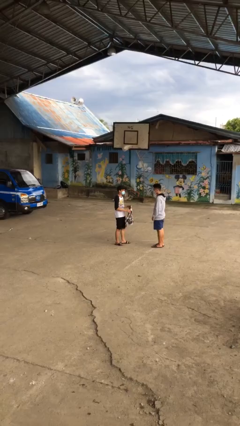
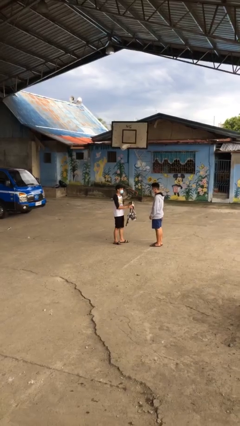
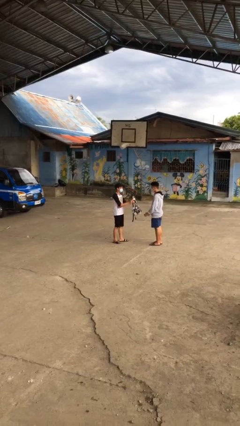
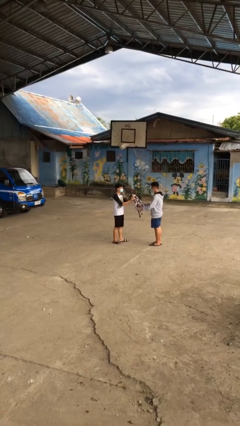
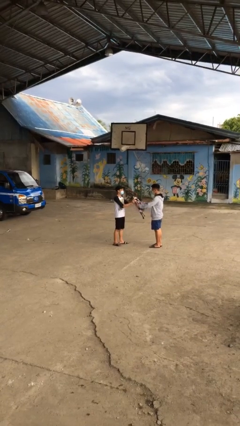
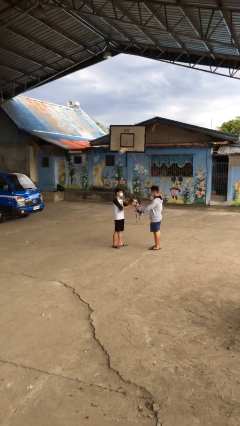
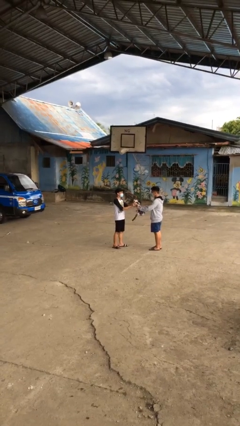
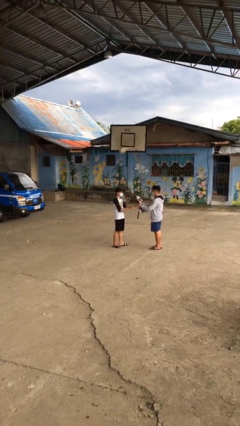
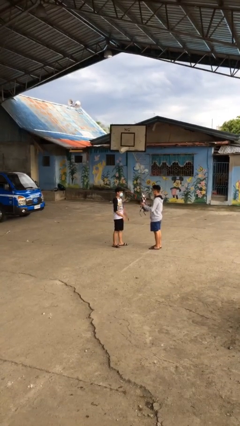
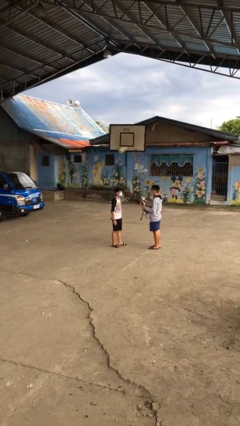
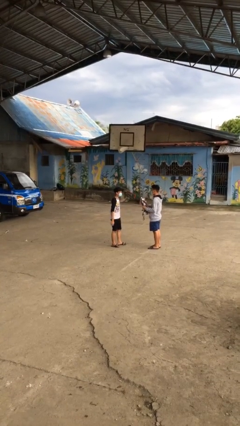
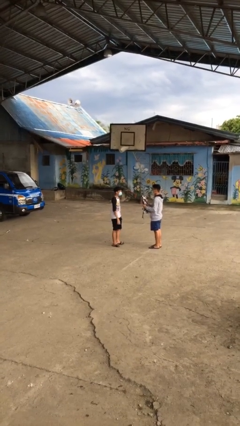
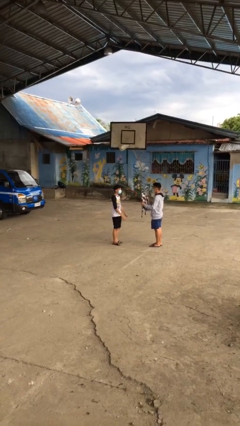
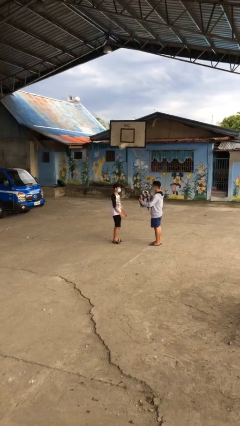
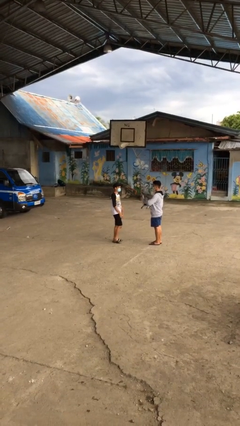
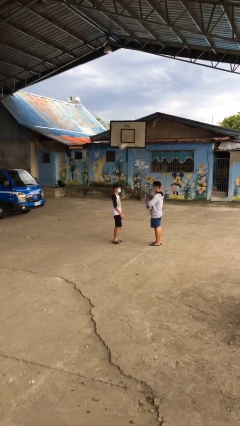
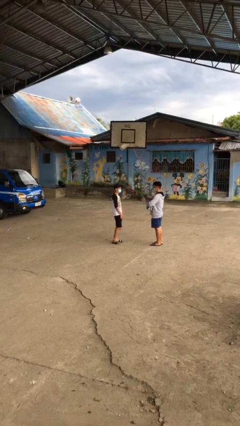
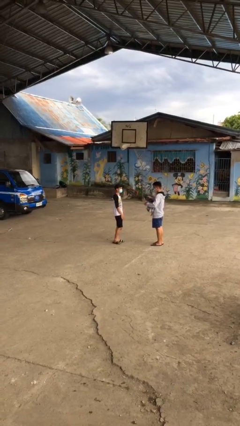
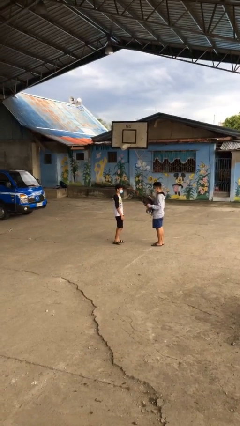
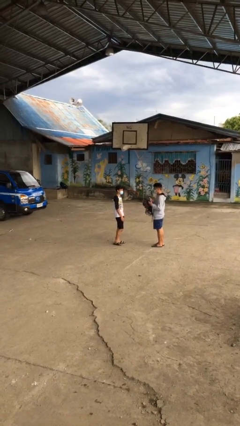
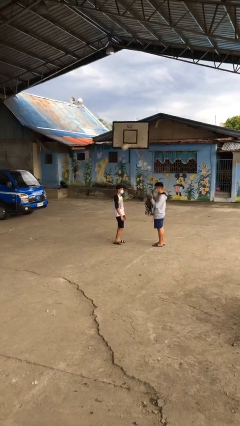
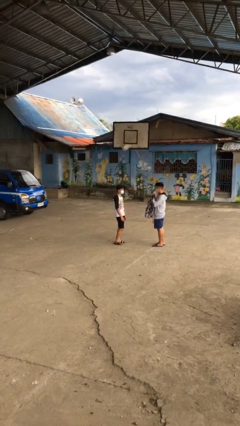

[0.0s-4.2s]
person transfers object to person

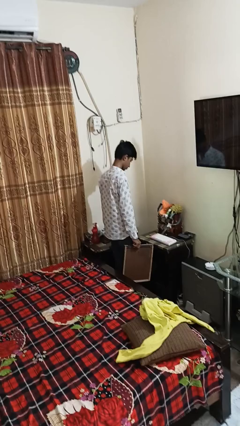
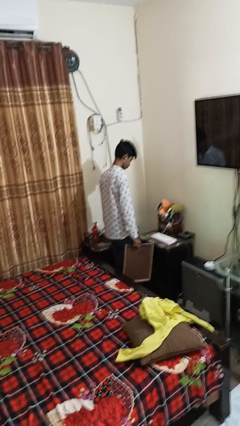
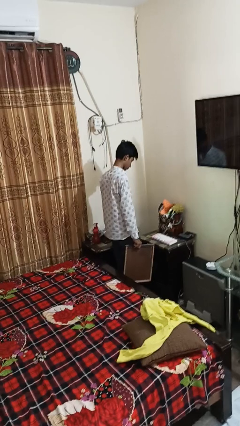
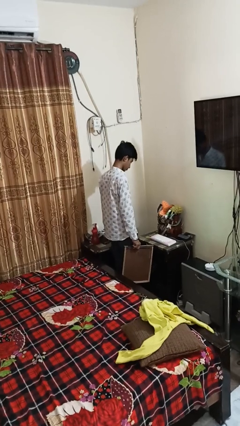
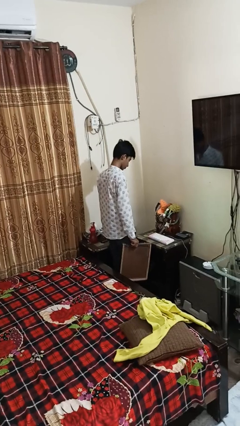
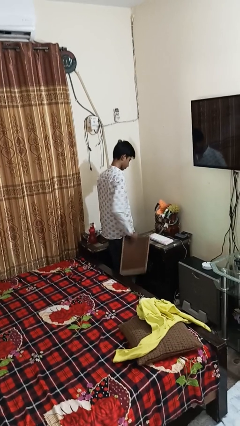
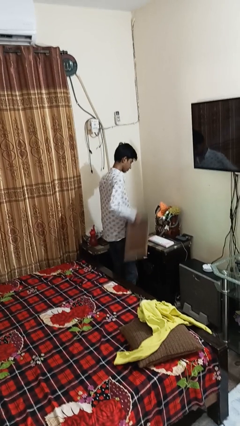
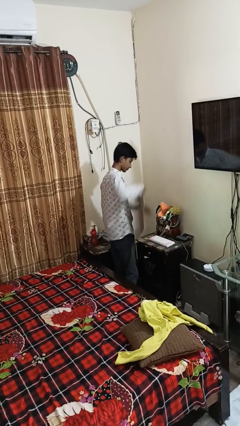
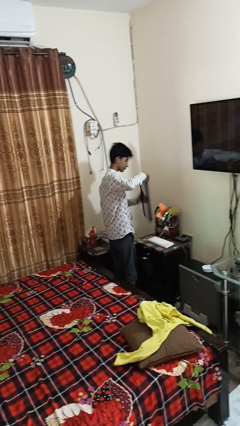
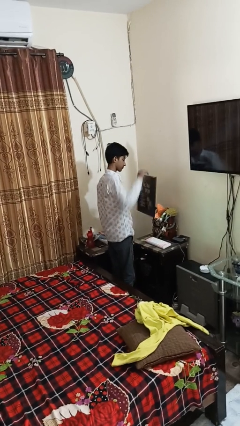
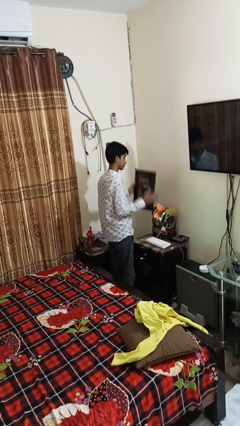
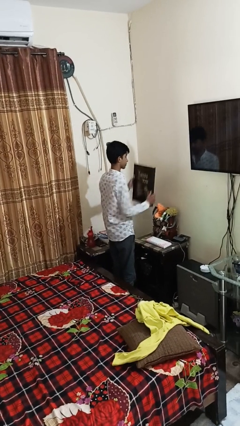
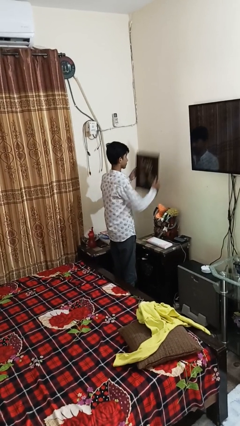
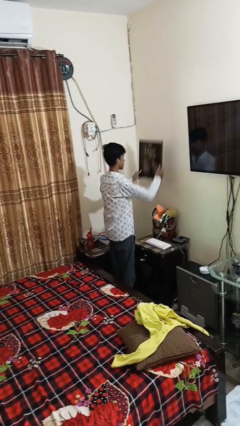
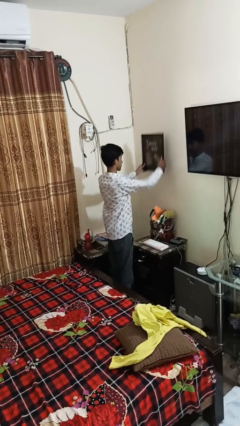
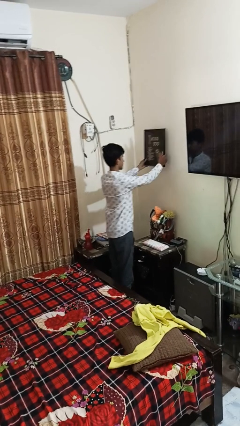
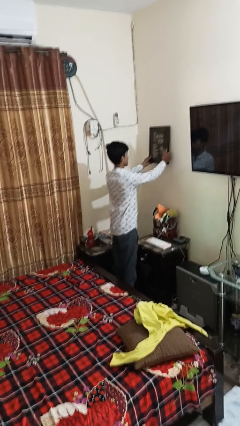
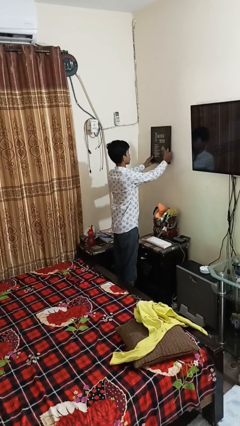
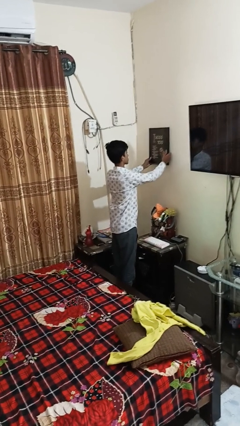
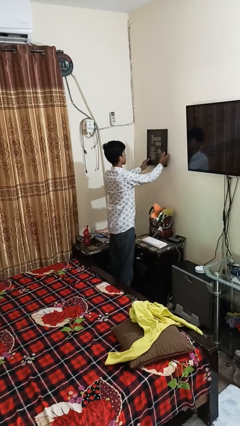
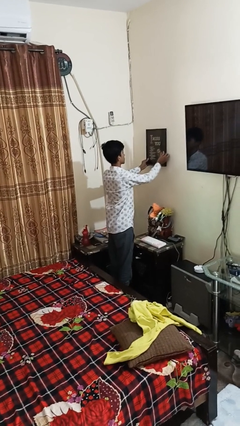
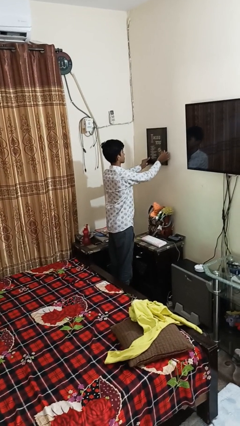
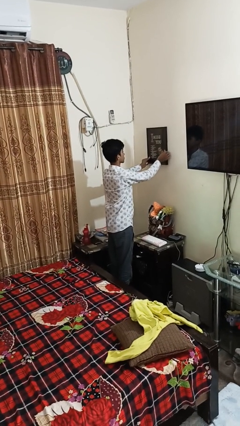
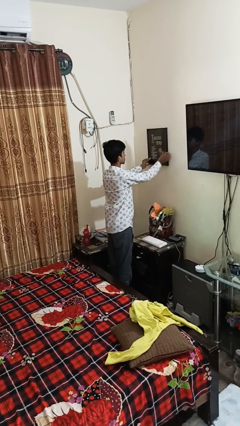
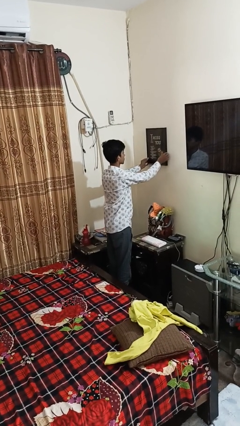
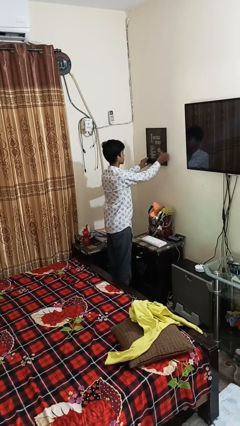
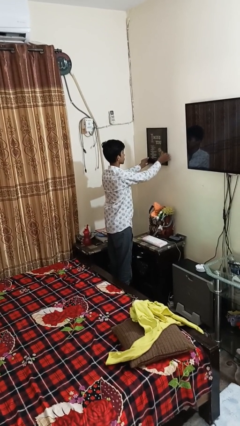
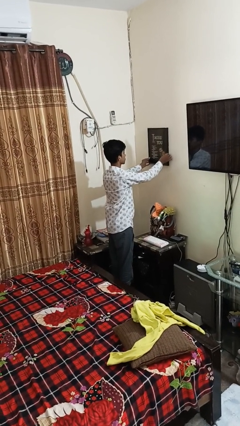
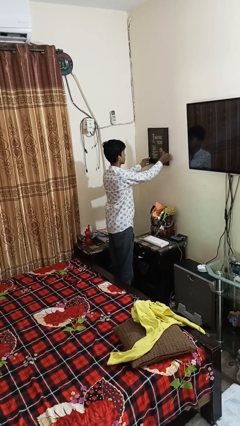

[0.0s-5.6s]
person puts up picture frame

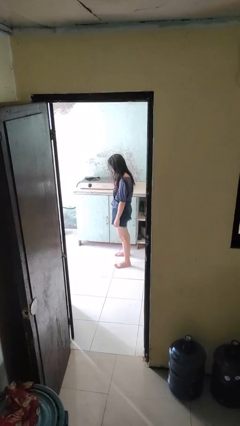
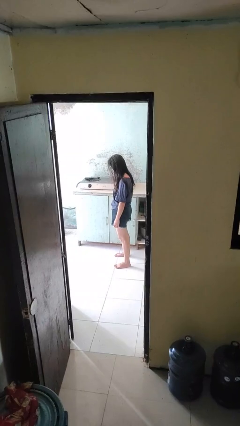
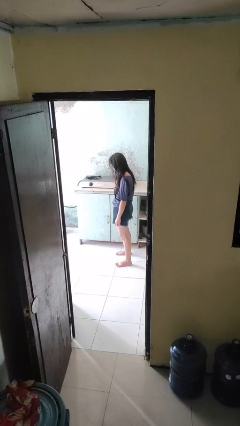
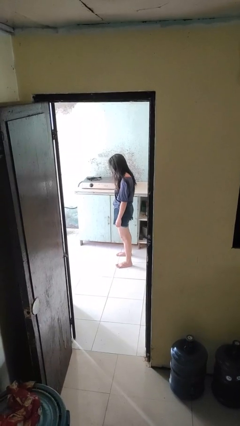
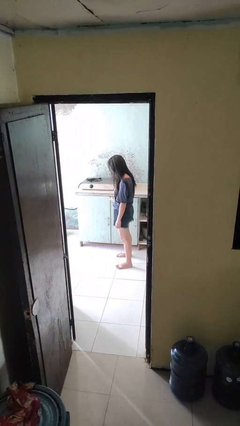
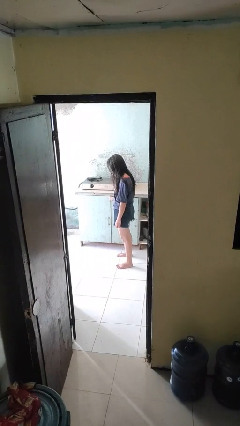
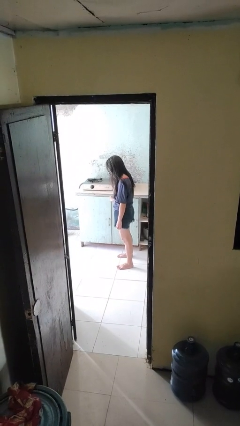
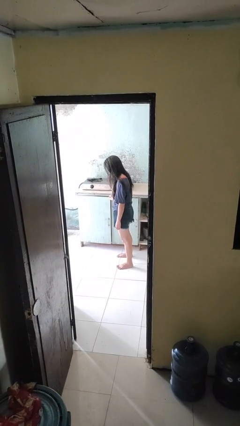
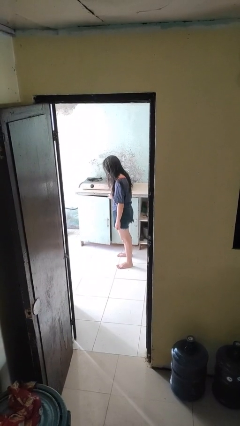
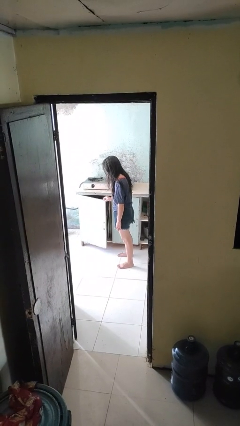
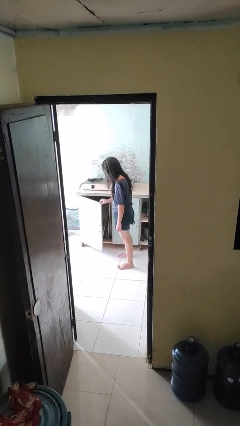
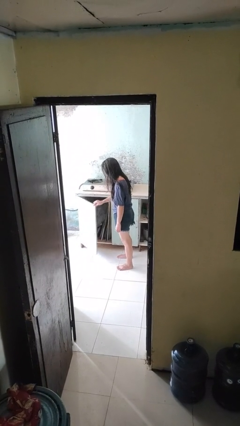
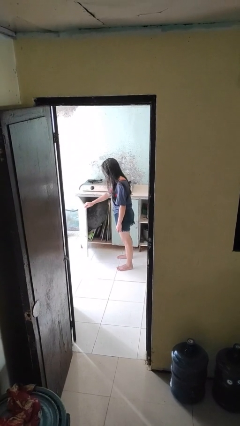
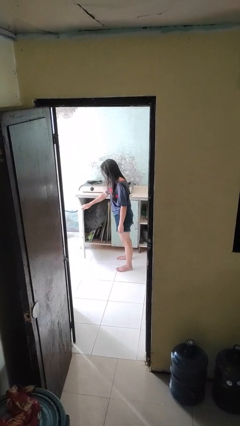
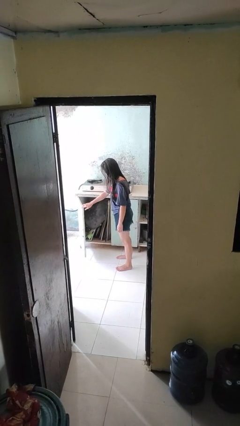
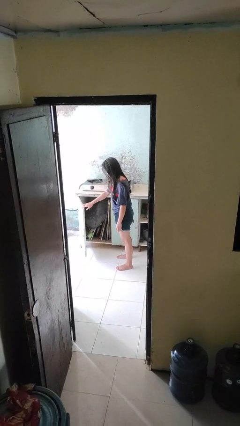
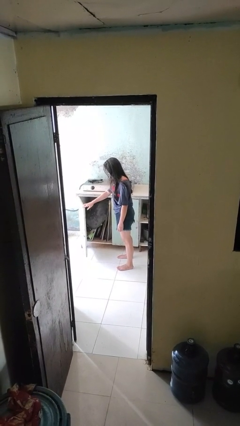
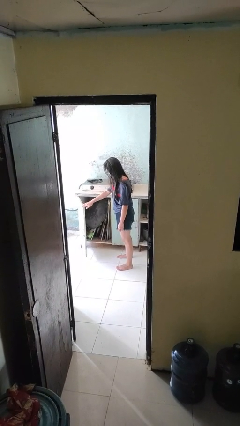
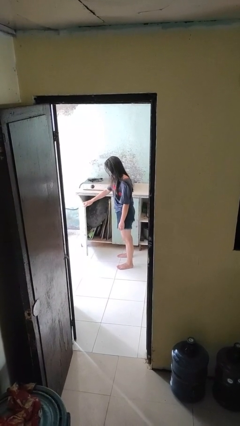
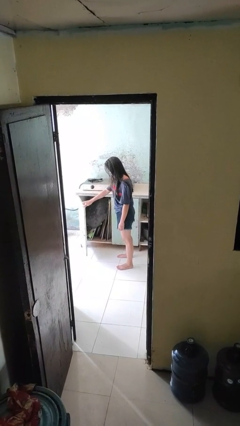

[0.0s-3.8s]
person opens cabinet

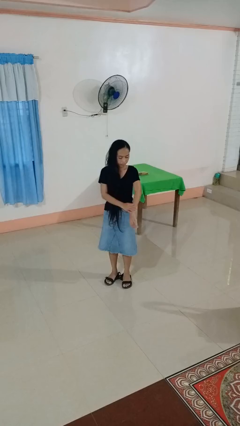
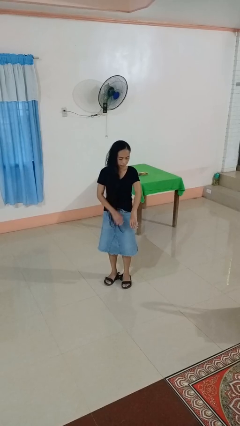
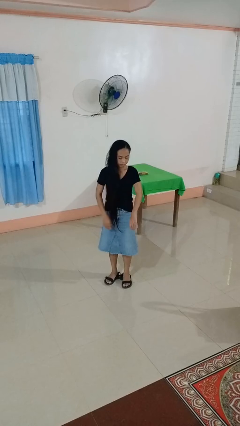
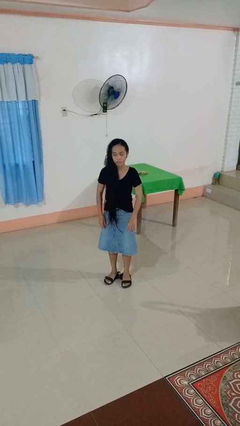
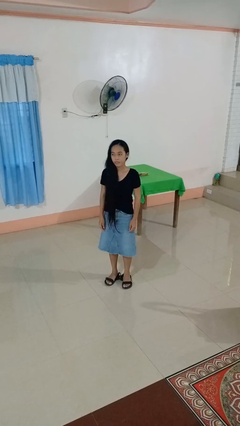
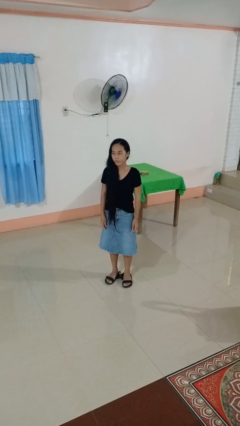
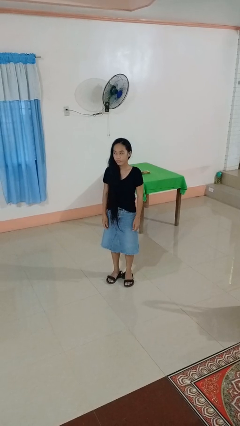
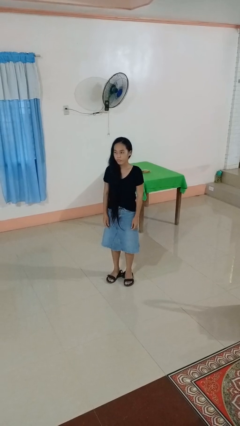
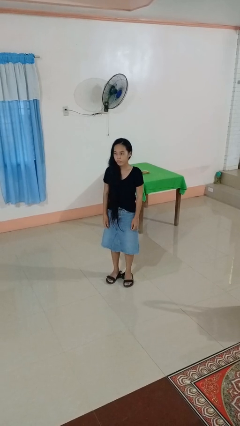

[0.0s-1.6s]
person swats bug

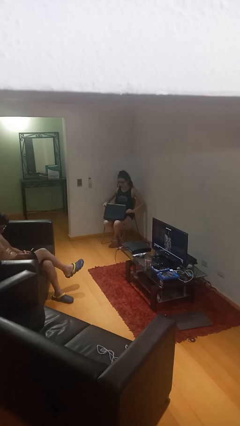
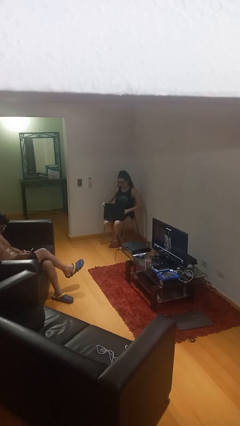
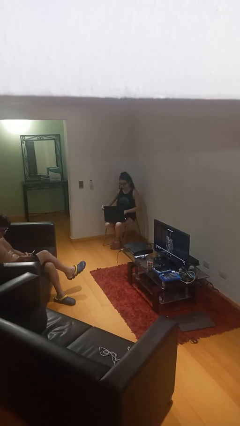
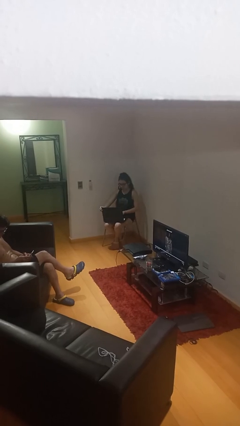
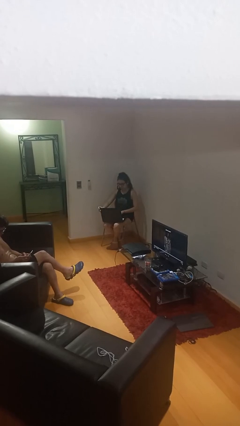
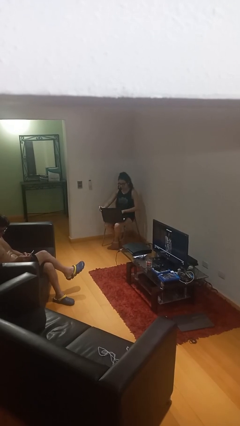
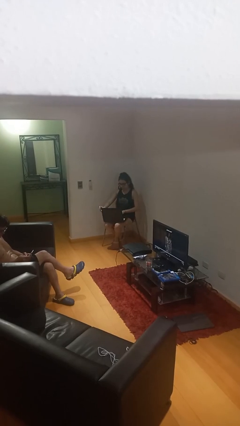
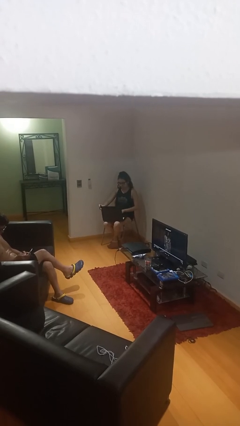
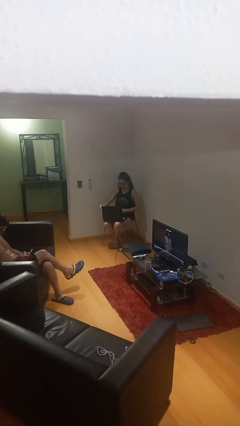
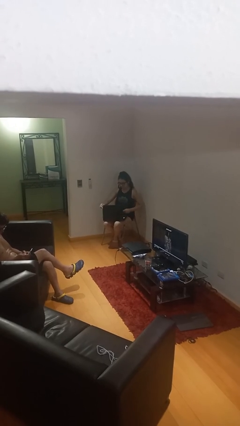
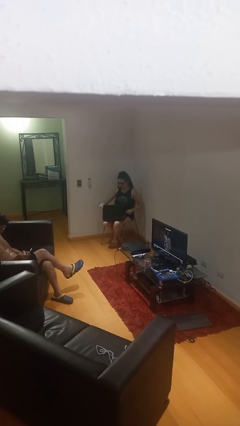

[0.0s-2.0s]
person interacts with laptop

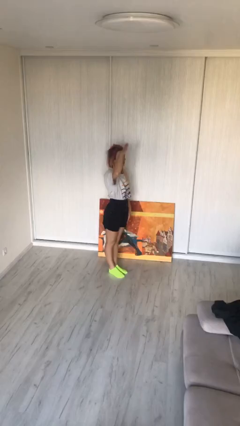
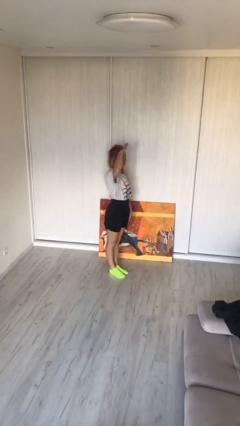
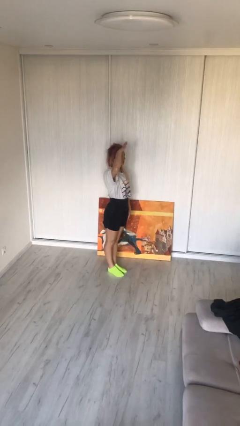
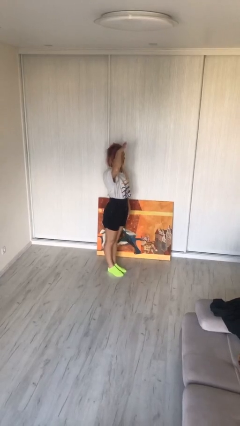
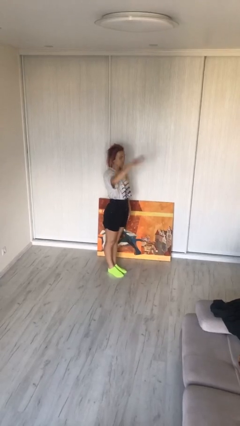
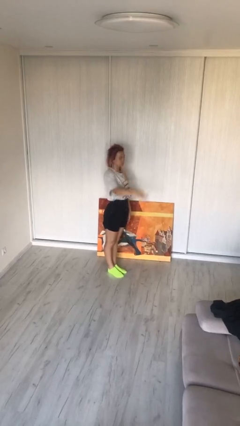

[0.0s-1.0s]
person salutes
